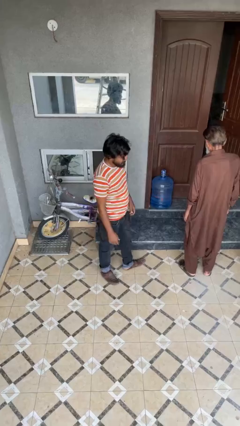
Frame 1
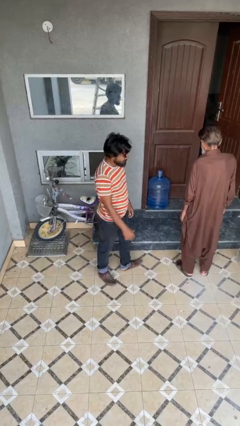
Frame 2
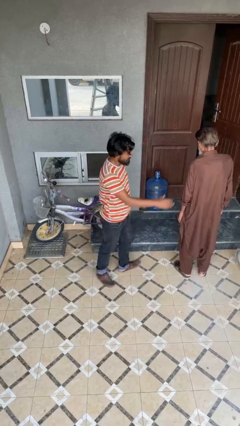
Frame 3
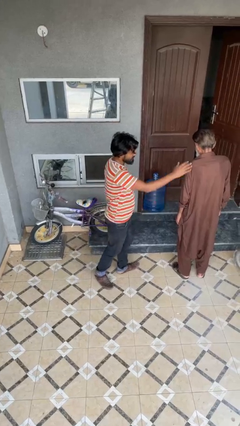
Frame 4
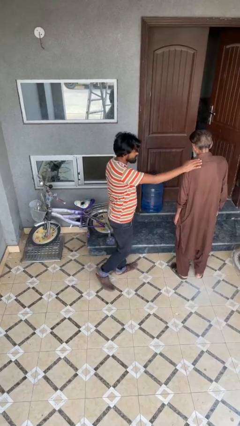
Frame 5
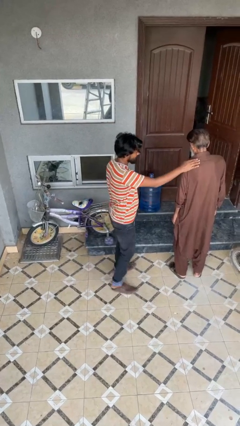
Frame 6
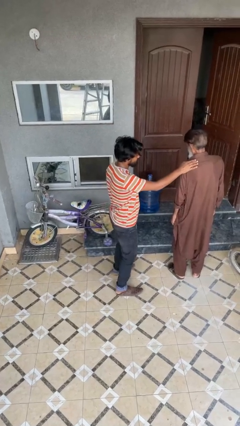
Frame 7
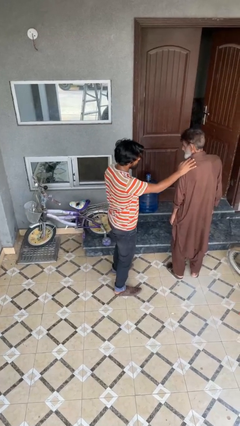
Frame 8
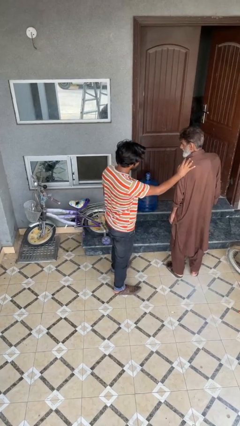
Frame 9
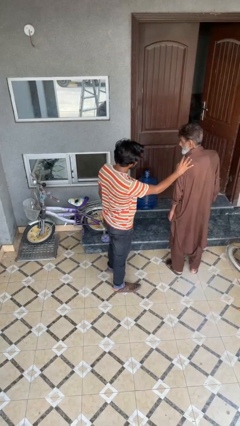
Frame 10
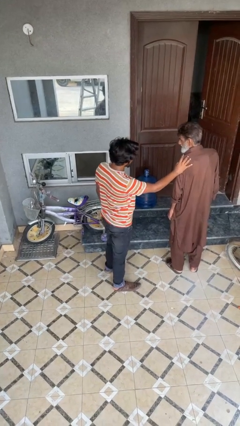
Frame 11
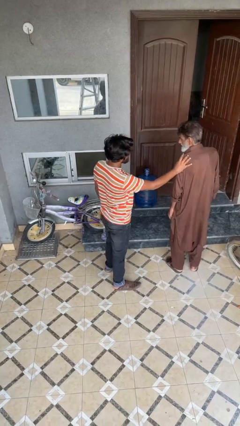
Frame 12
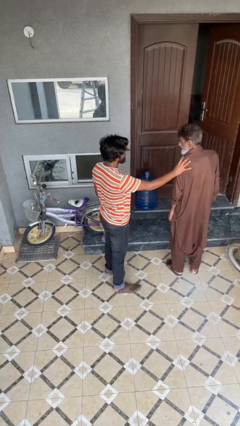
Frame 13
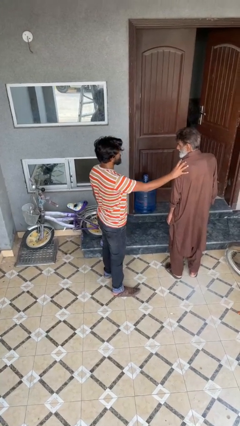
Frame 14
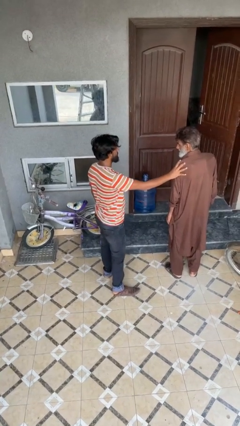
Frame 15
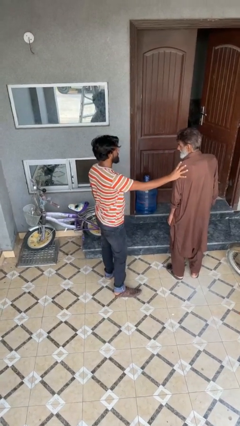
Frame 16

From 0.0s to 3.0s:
person touches back of person

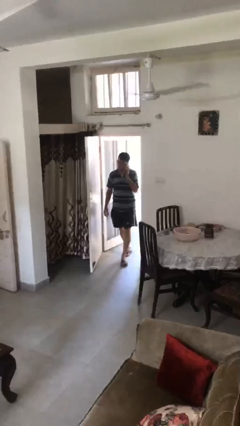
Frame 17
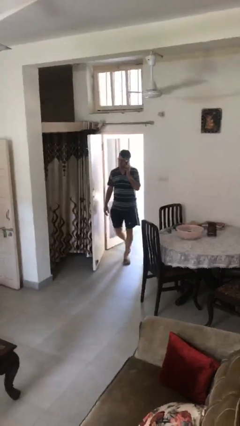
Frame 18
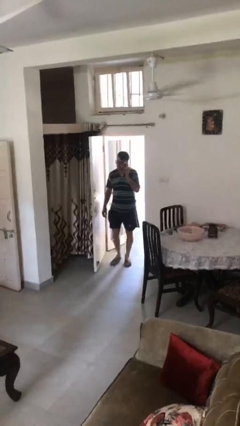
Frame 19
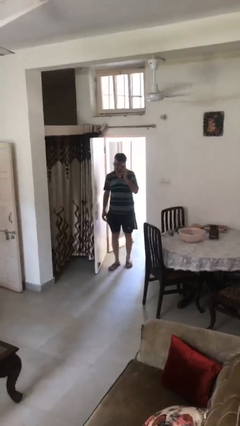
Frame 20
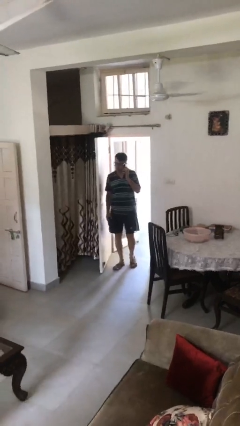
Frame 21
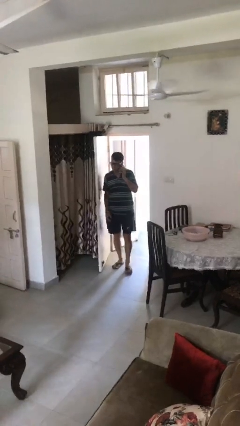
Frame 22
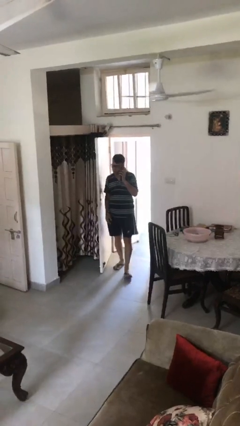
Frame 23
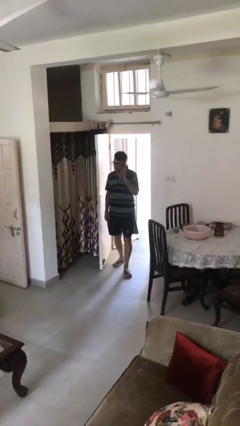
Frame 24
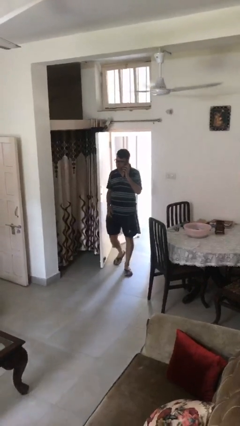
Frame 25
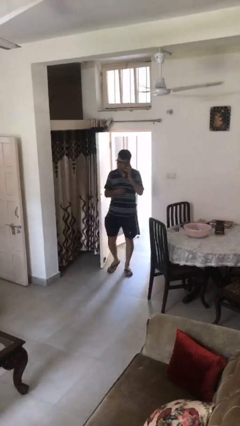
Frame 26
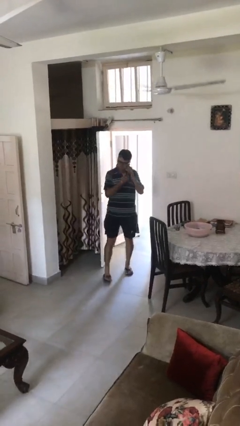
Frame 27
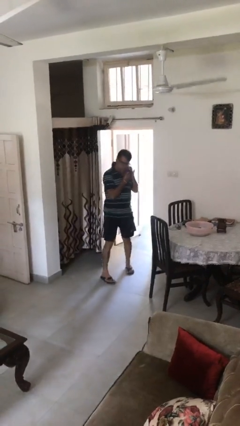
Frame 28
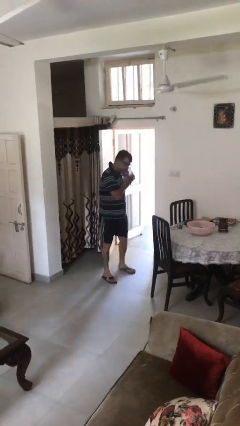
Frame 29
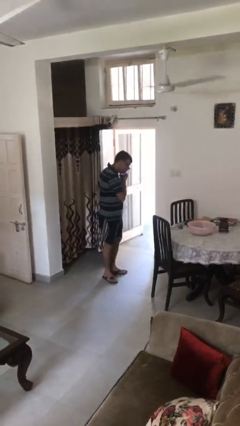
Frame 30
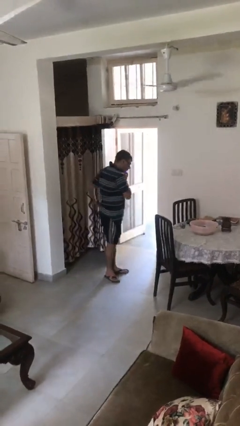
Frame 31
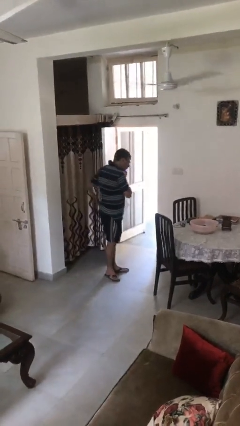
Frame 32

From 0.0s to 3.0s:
person enters scene through structure

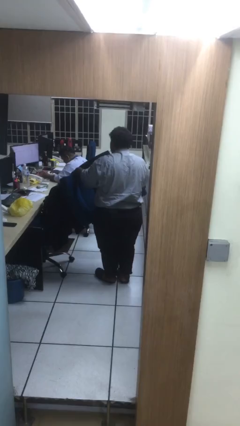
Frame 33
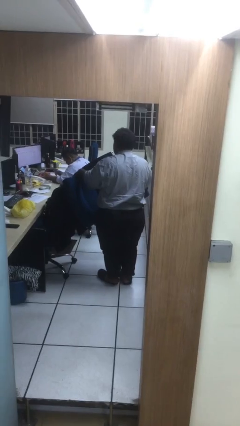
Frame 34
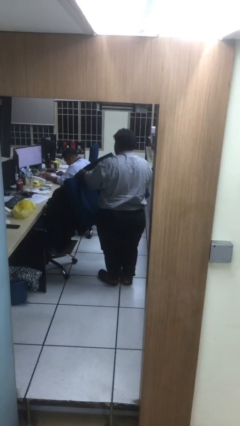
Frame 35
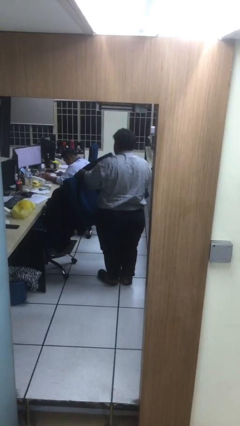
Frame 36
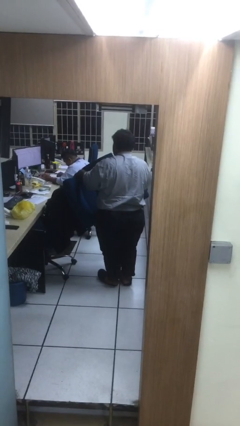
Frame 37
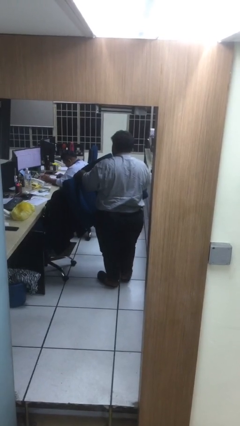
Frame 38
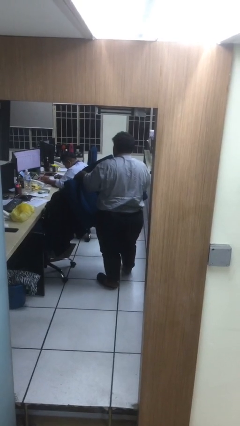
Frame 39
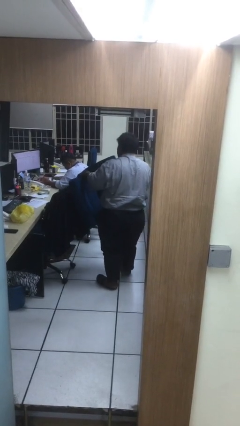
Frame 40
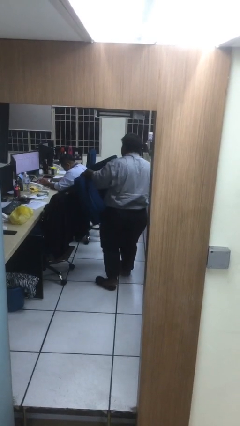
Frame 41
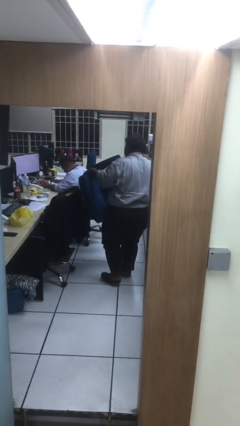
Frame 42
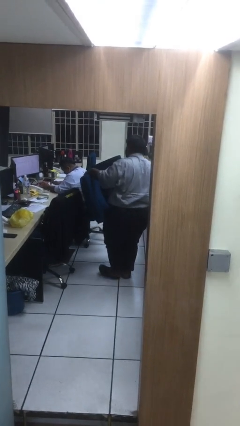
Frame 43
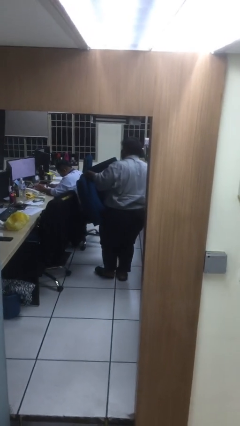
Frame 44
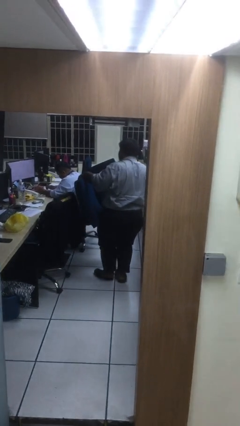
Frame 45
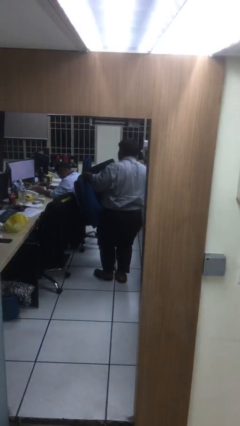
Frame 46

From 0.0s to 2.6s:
person carries furniture

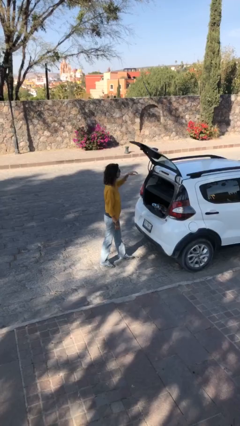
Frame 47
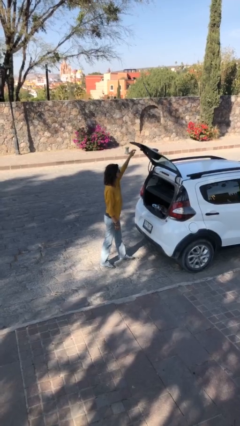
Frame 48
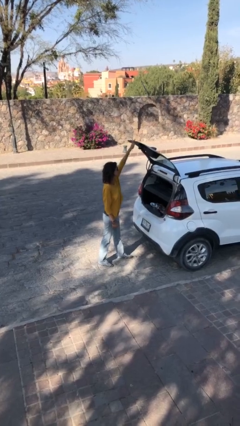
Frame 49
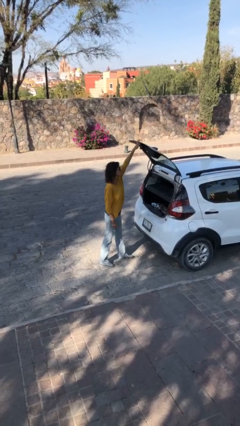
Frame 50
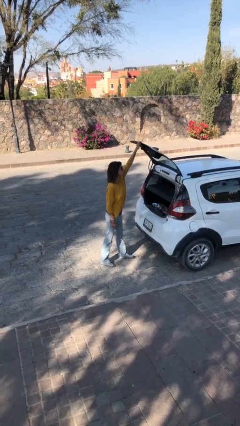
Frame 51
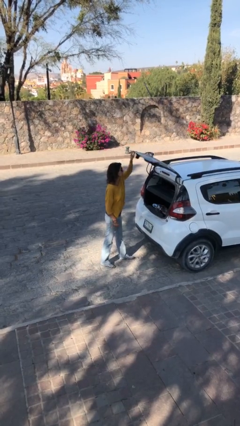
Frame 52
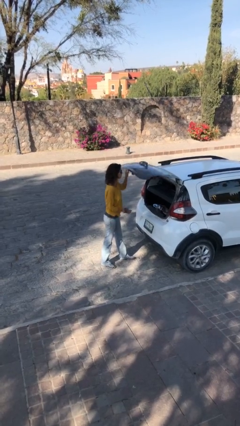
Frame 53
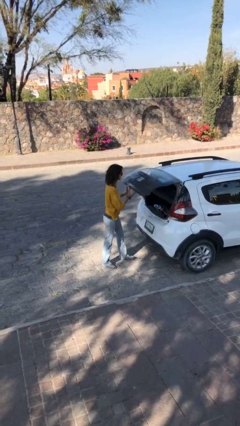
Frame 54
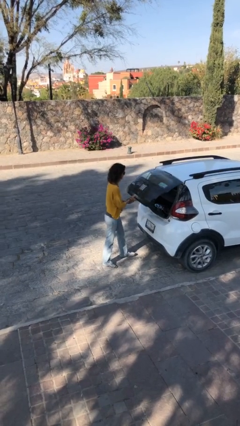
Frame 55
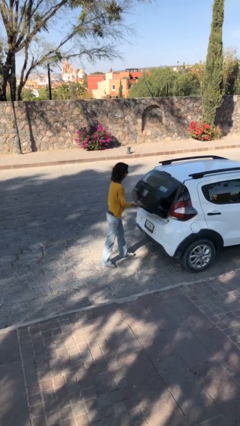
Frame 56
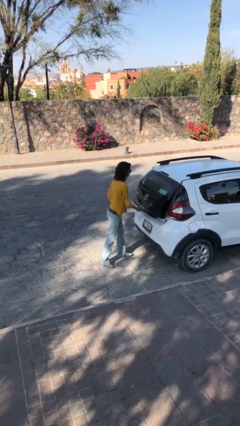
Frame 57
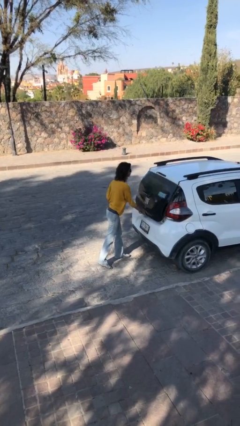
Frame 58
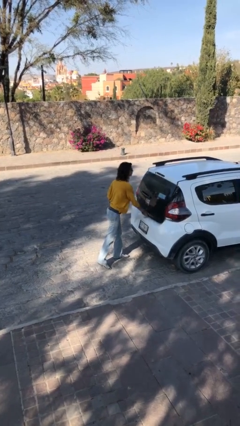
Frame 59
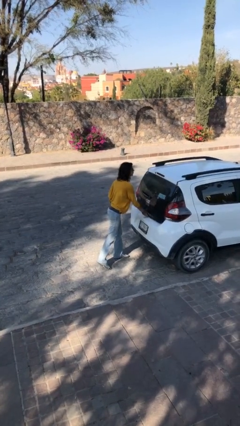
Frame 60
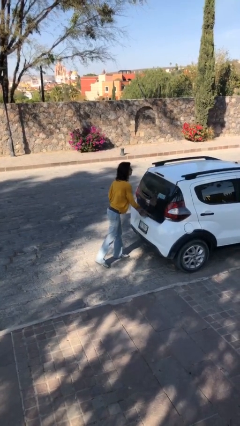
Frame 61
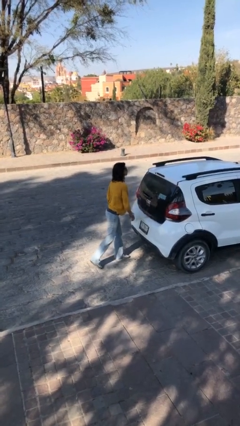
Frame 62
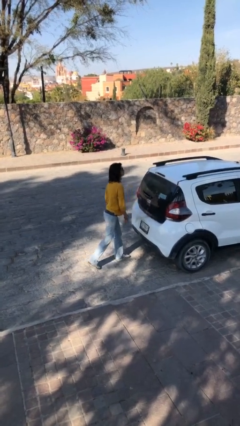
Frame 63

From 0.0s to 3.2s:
person closes car trunk

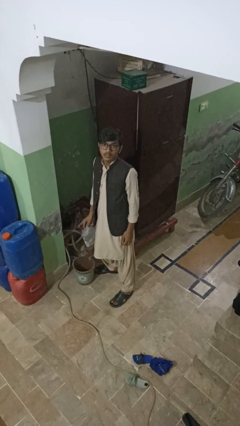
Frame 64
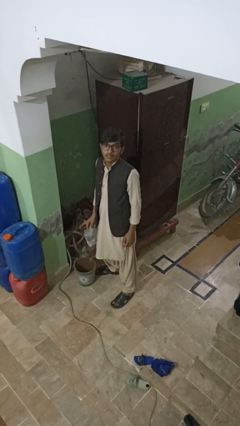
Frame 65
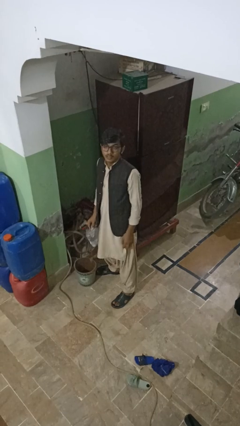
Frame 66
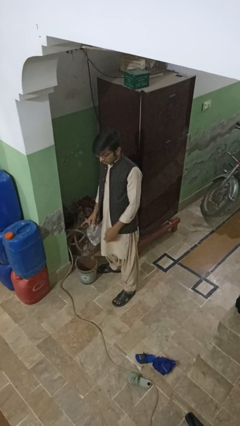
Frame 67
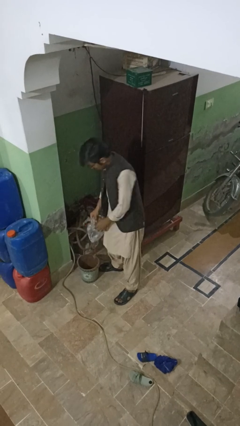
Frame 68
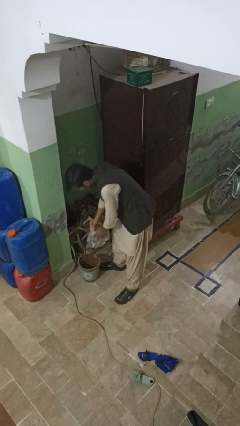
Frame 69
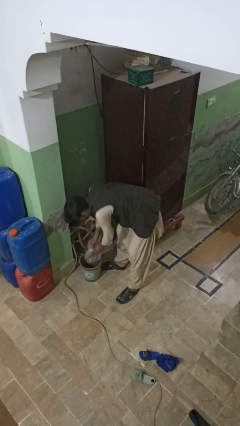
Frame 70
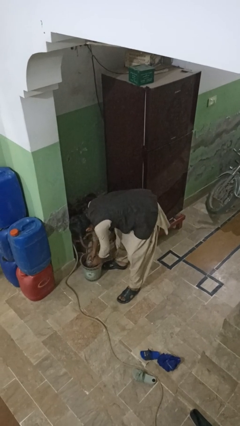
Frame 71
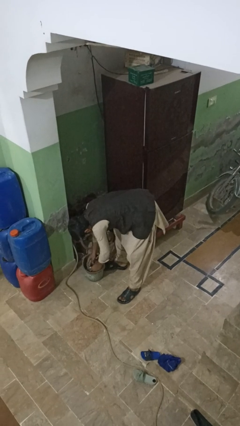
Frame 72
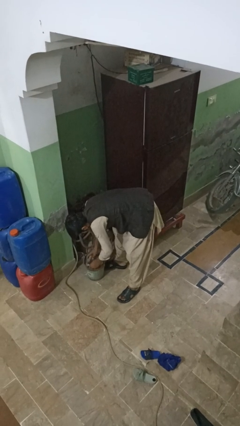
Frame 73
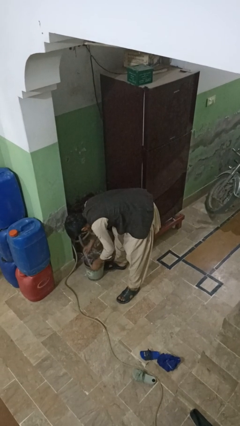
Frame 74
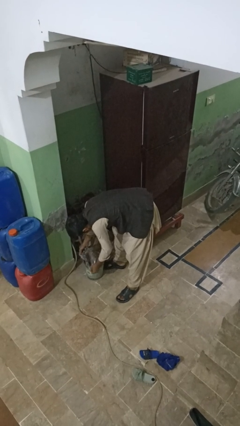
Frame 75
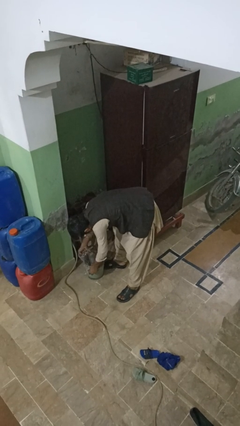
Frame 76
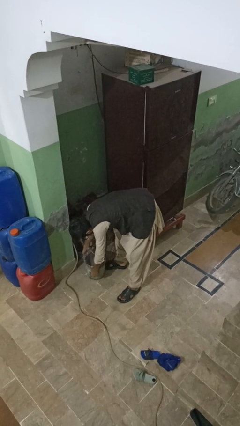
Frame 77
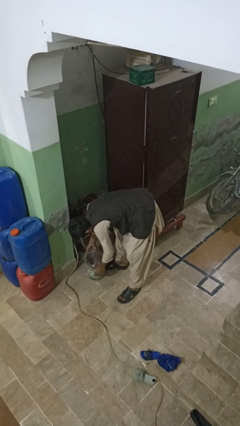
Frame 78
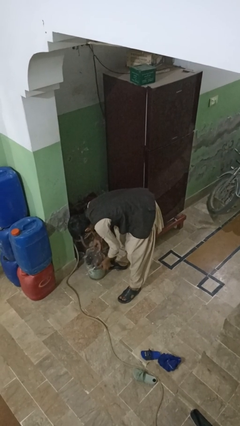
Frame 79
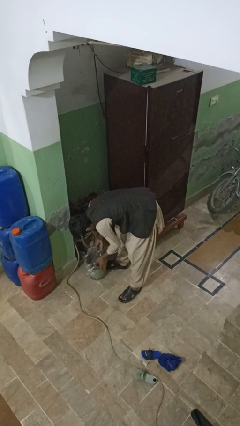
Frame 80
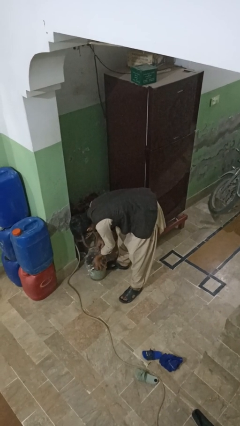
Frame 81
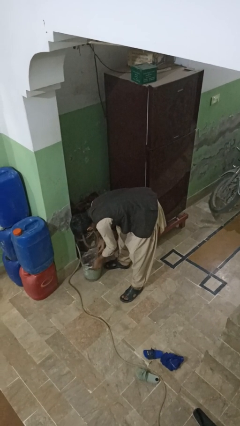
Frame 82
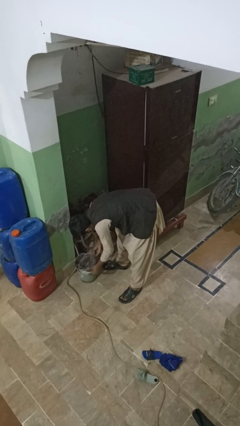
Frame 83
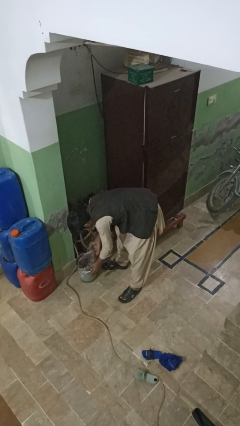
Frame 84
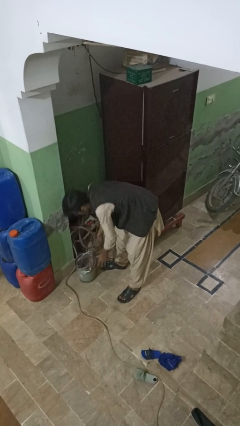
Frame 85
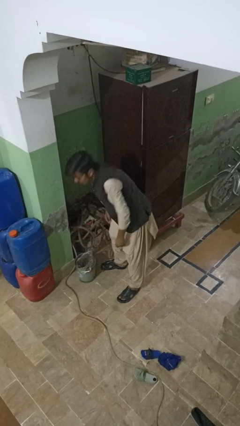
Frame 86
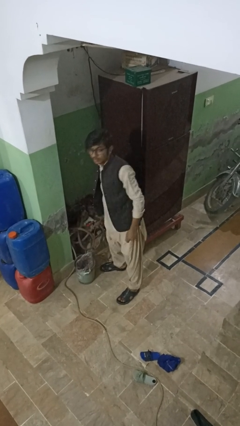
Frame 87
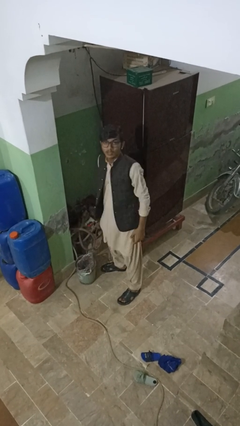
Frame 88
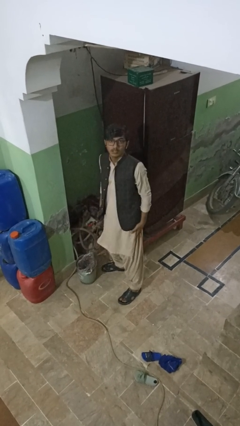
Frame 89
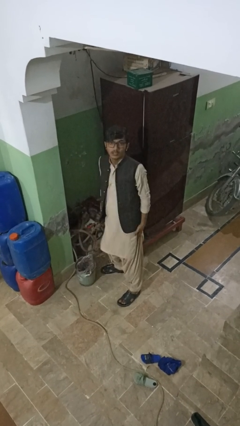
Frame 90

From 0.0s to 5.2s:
person inserts trashbag into trashcan

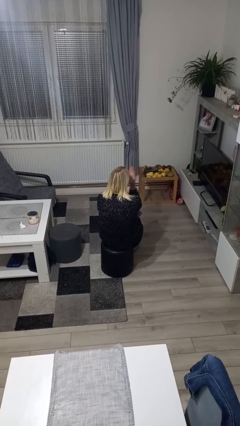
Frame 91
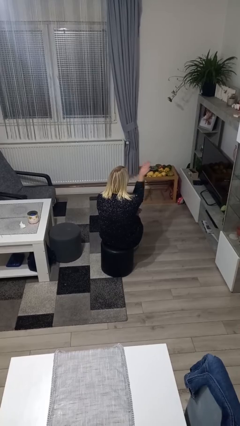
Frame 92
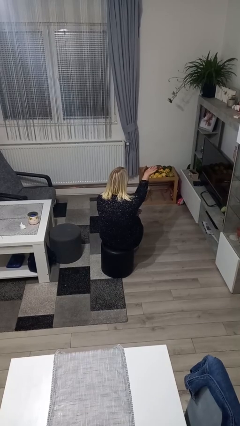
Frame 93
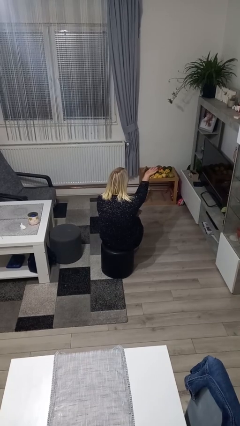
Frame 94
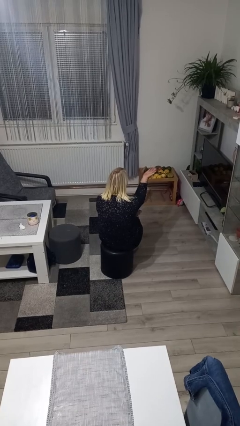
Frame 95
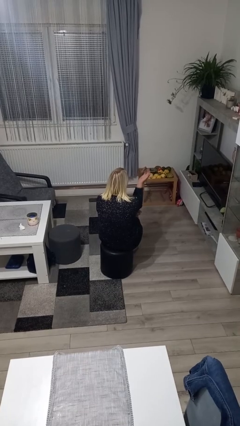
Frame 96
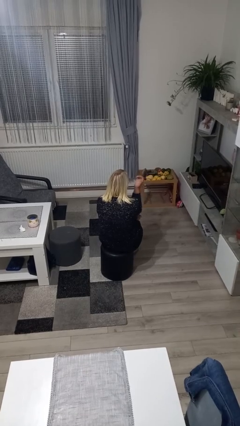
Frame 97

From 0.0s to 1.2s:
person gestures blow kiss
